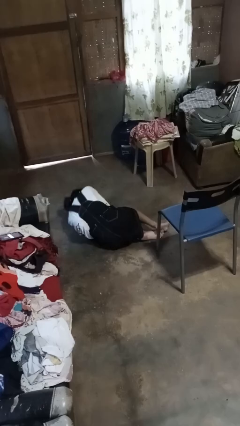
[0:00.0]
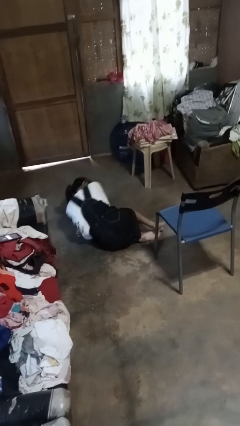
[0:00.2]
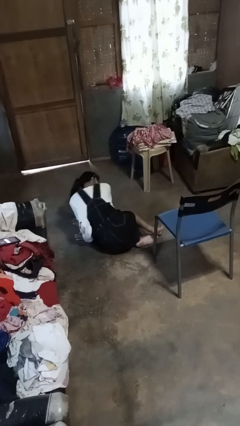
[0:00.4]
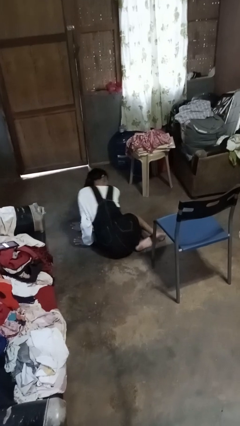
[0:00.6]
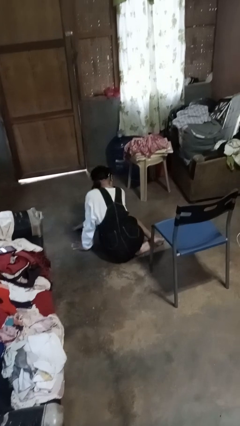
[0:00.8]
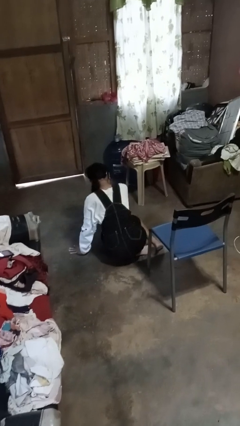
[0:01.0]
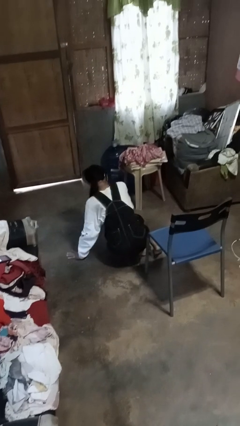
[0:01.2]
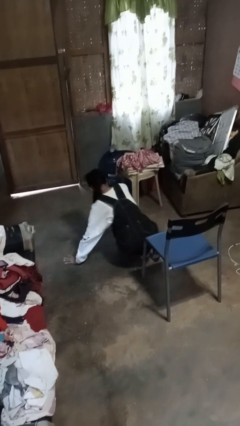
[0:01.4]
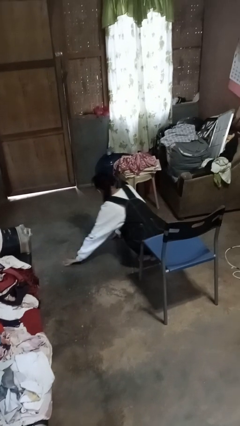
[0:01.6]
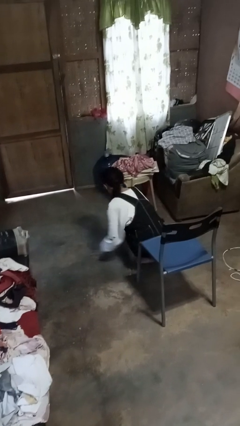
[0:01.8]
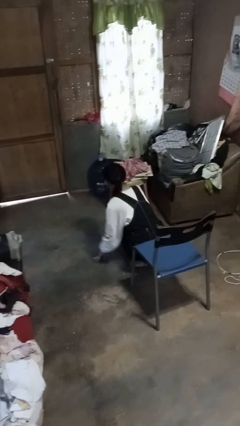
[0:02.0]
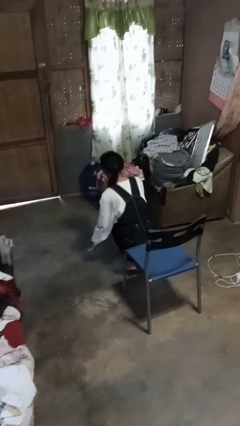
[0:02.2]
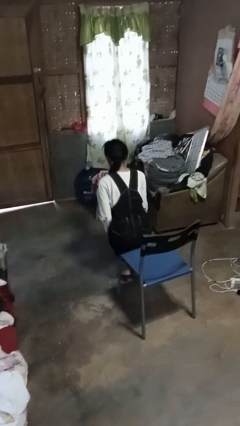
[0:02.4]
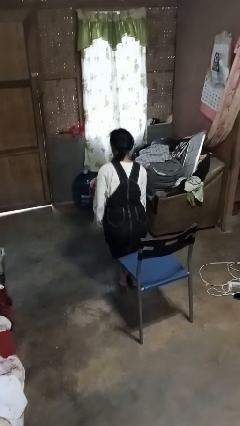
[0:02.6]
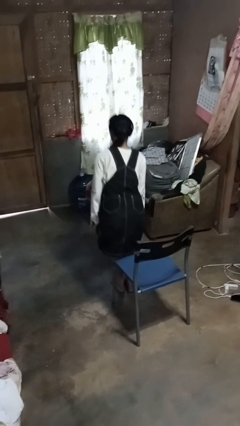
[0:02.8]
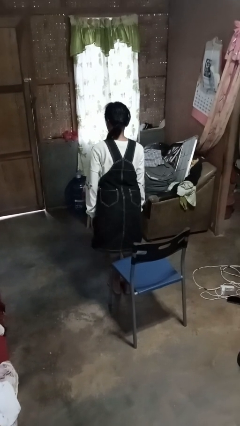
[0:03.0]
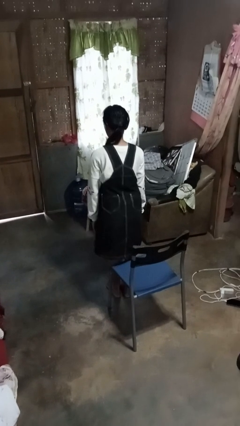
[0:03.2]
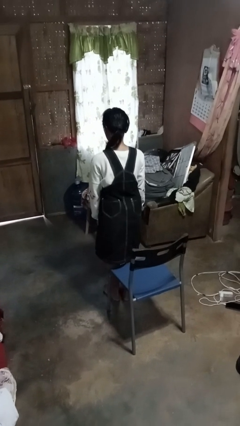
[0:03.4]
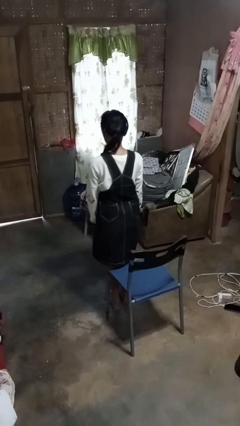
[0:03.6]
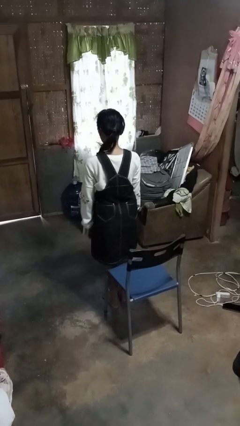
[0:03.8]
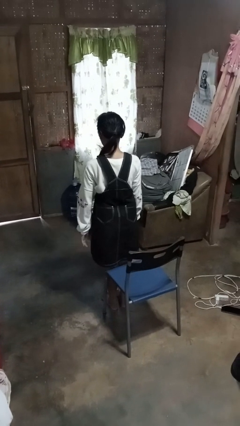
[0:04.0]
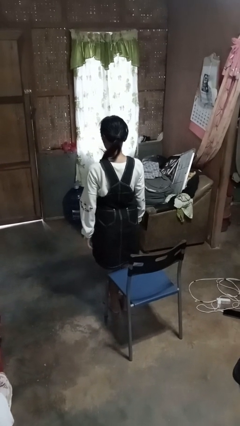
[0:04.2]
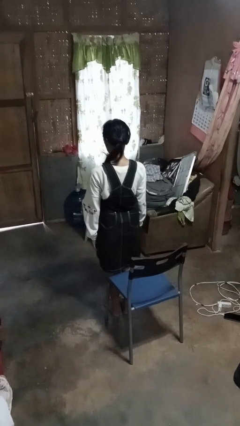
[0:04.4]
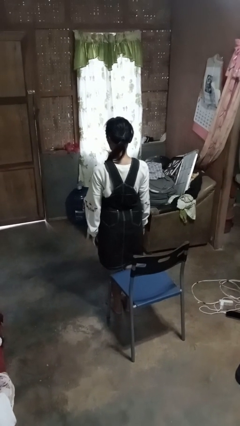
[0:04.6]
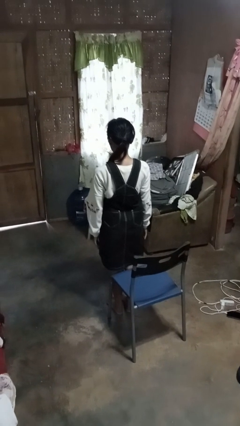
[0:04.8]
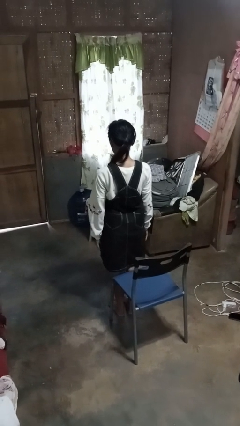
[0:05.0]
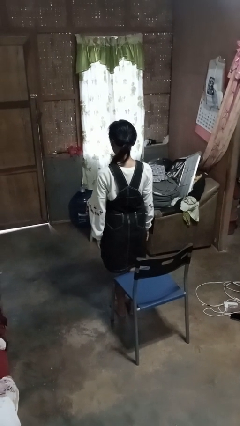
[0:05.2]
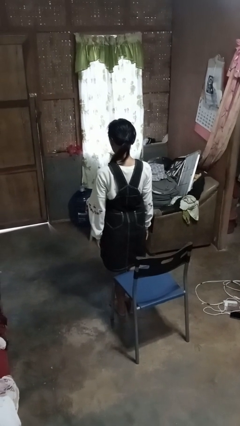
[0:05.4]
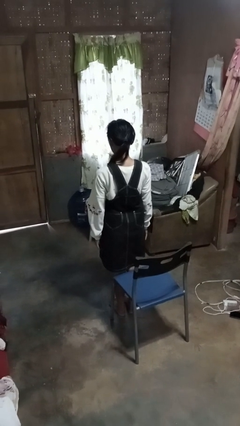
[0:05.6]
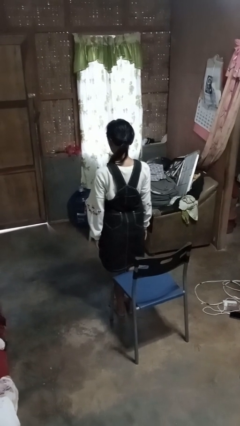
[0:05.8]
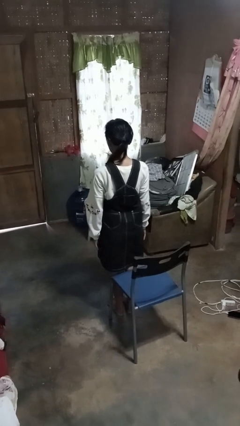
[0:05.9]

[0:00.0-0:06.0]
person stands up from floor

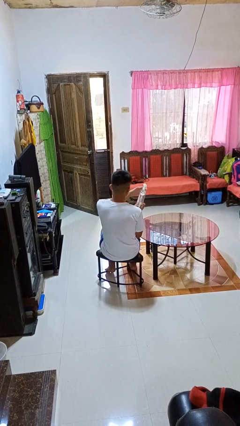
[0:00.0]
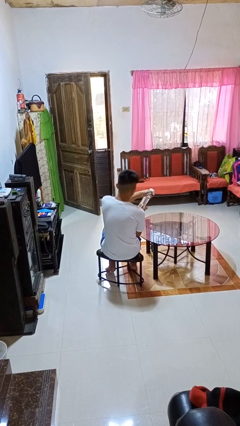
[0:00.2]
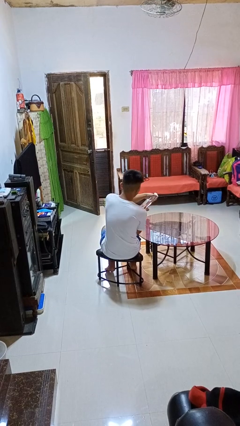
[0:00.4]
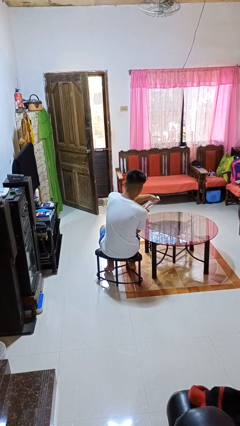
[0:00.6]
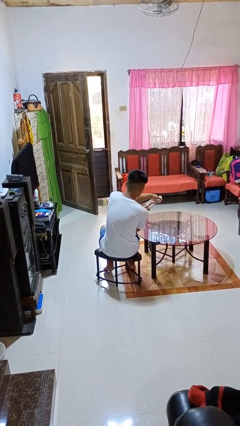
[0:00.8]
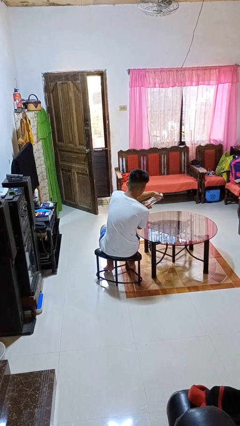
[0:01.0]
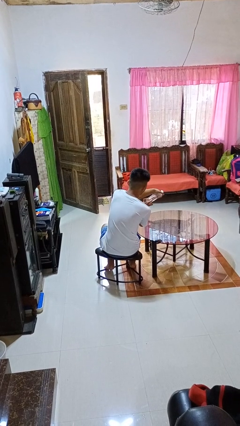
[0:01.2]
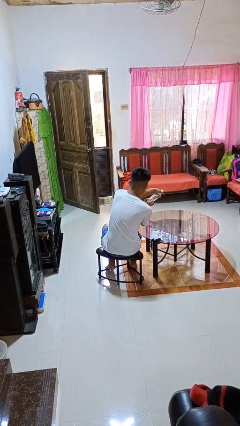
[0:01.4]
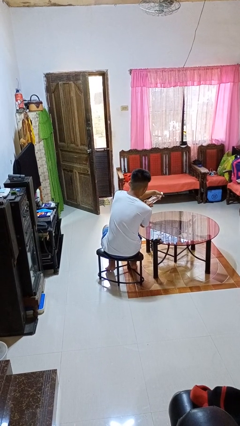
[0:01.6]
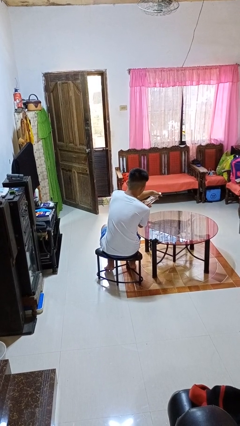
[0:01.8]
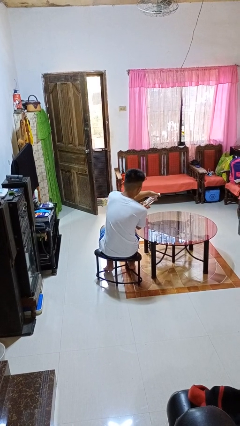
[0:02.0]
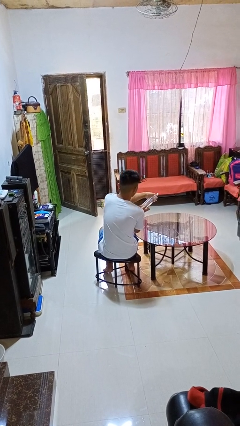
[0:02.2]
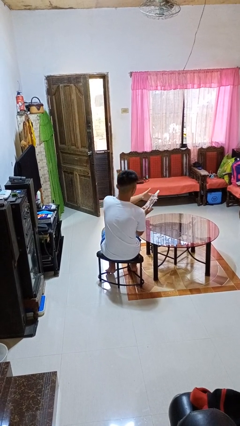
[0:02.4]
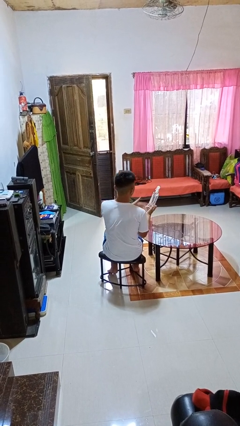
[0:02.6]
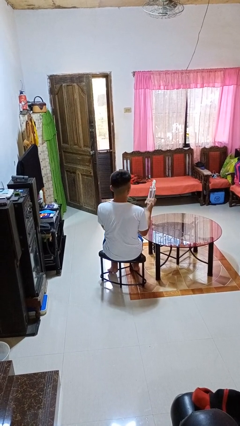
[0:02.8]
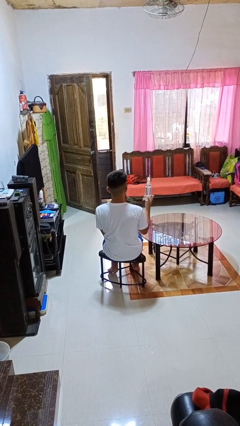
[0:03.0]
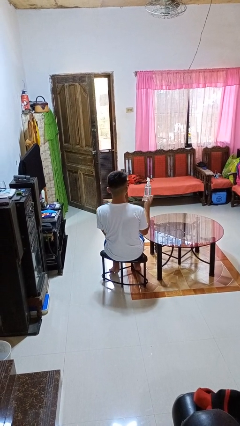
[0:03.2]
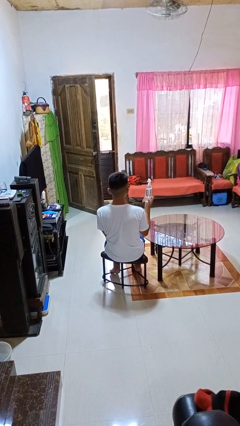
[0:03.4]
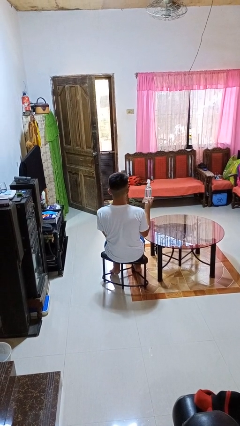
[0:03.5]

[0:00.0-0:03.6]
person sprays from bottle

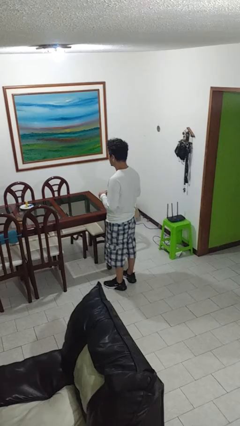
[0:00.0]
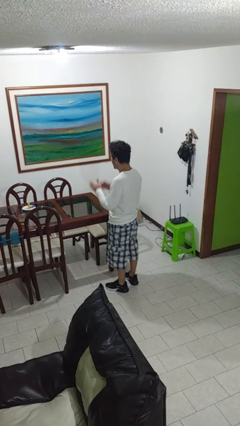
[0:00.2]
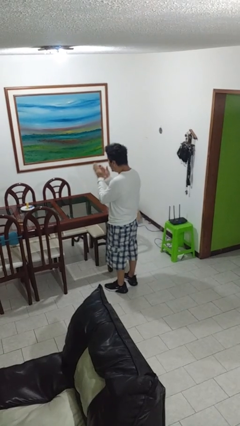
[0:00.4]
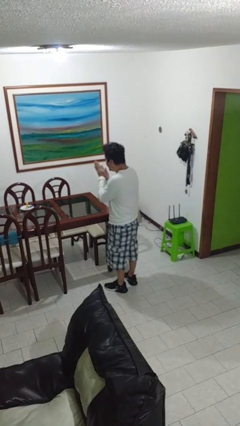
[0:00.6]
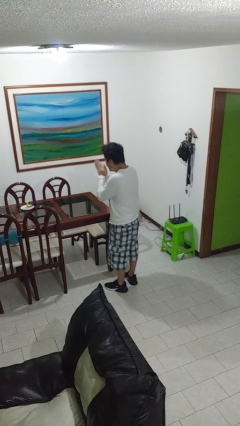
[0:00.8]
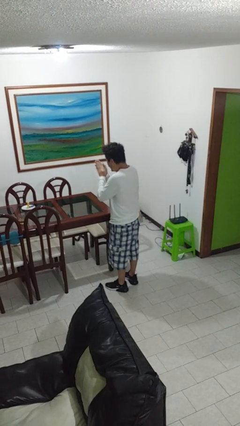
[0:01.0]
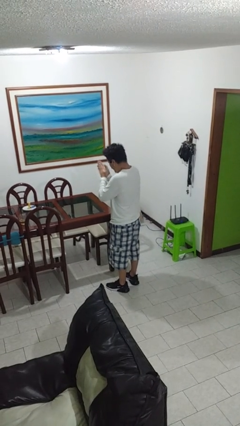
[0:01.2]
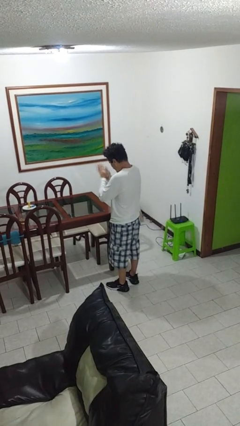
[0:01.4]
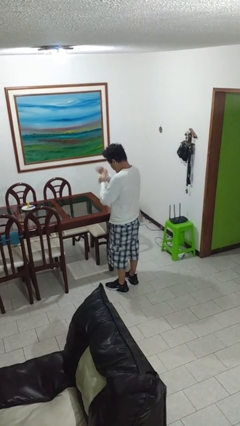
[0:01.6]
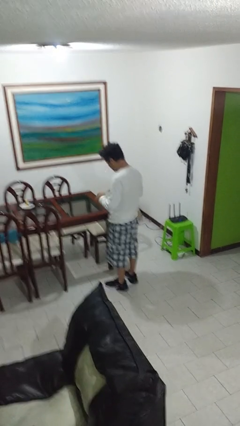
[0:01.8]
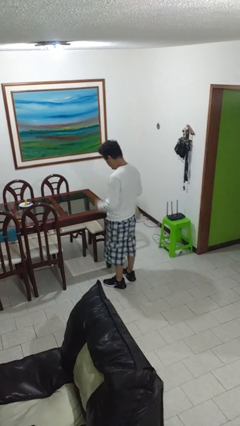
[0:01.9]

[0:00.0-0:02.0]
person blows into hands

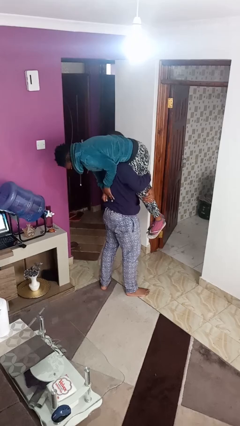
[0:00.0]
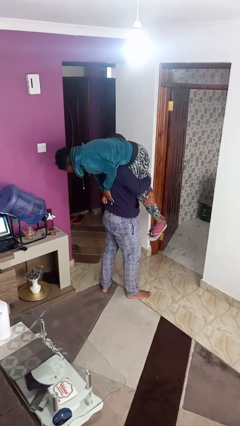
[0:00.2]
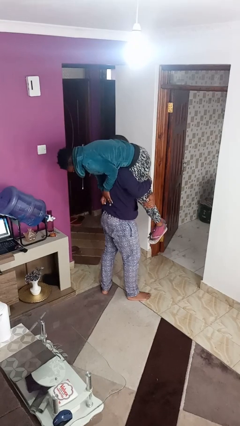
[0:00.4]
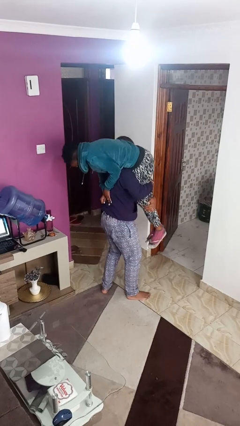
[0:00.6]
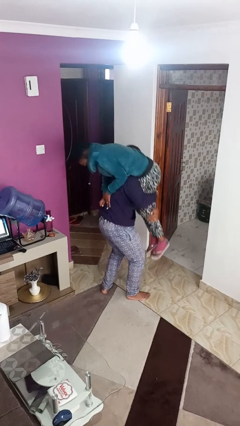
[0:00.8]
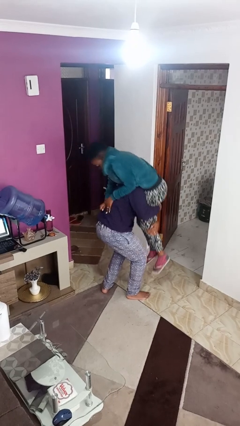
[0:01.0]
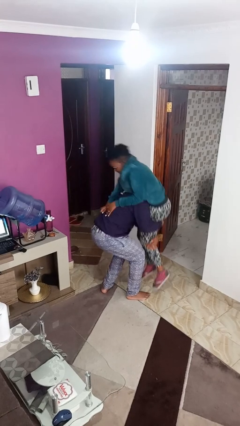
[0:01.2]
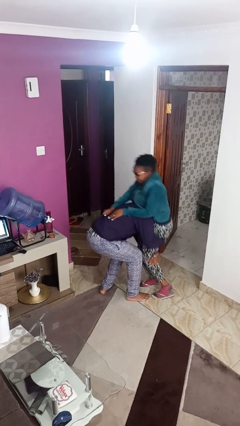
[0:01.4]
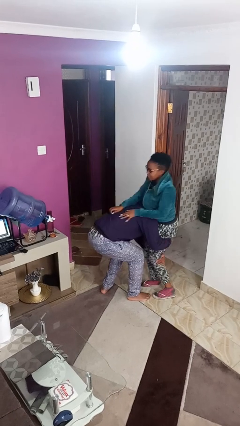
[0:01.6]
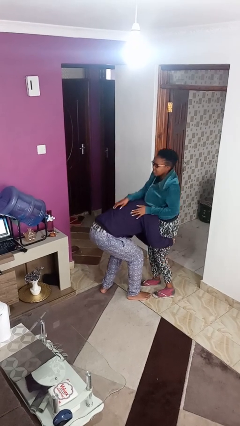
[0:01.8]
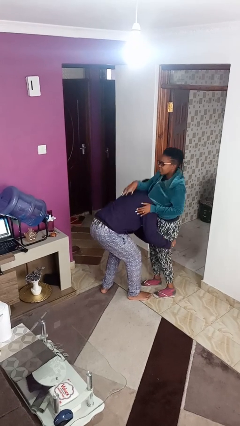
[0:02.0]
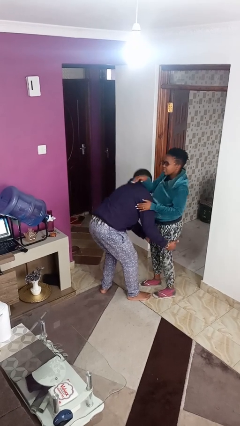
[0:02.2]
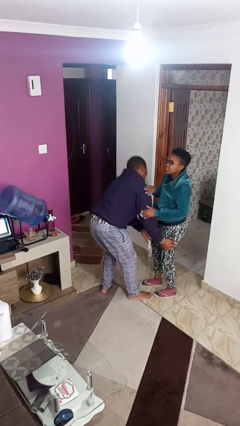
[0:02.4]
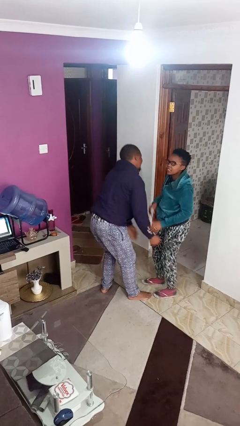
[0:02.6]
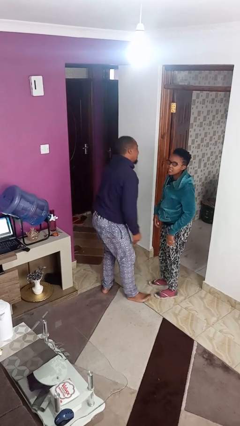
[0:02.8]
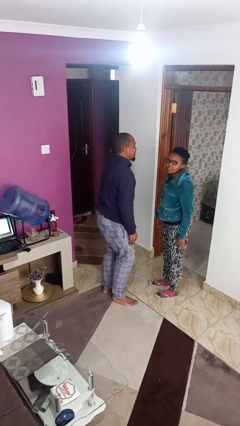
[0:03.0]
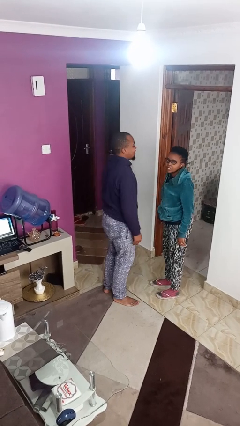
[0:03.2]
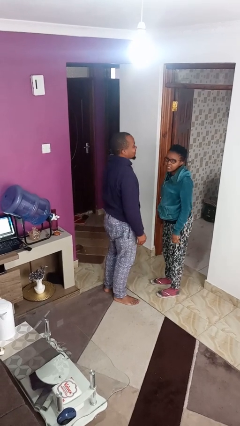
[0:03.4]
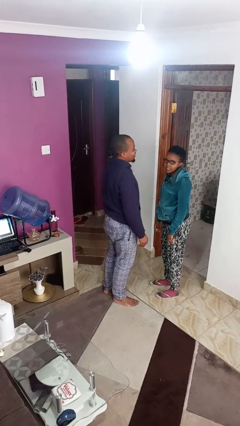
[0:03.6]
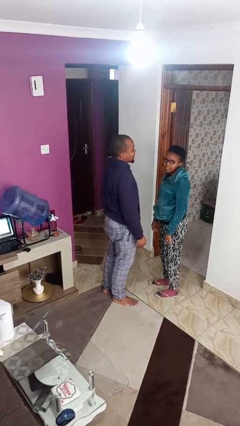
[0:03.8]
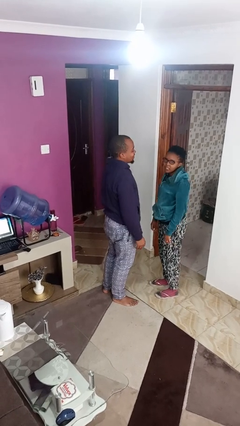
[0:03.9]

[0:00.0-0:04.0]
person puts down person

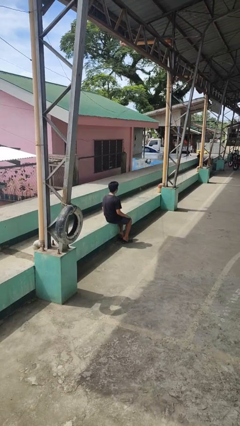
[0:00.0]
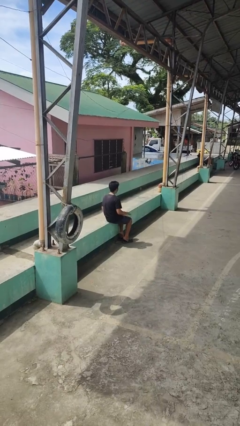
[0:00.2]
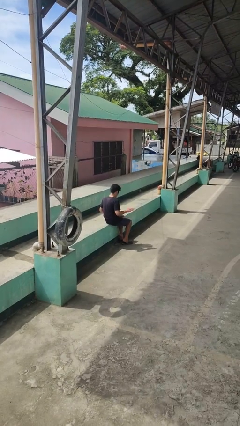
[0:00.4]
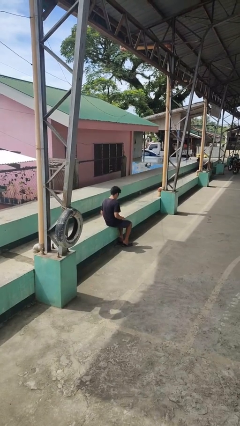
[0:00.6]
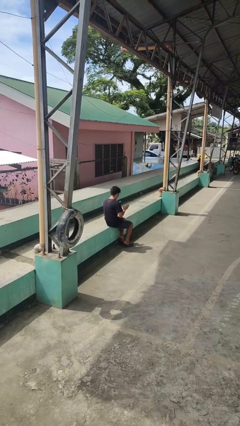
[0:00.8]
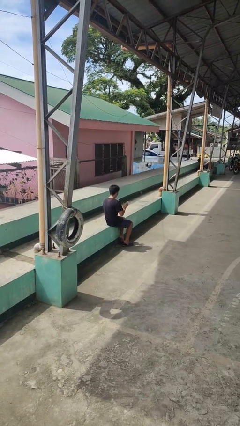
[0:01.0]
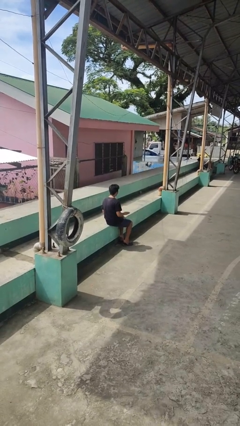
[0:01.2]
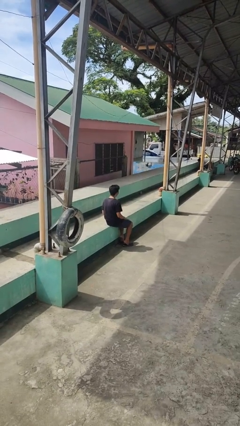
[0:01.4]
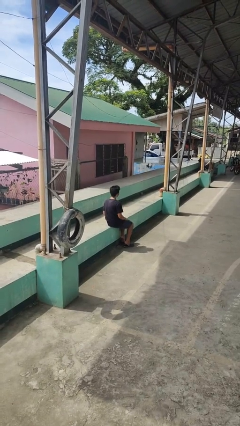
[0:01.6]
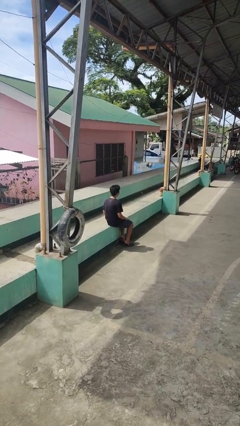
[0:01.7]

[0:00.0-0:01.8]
person slaps hands on thighs
